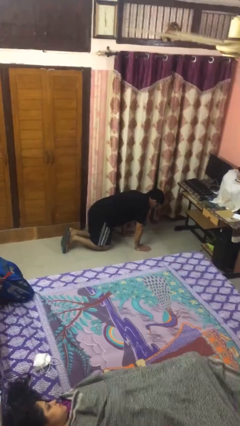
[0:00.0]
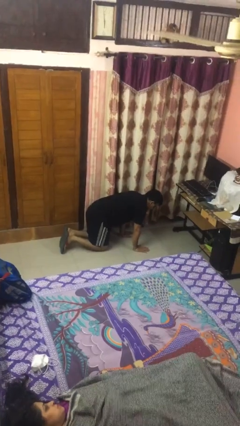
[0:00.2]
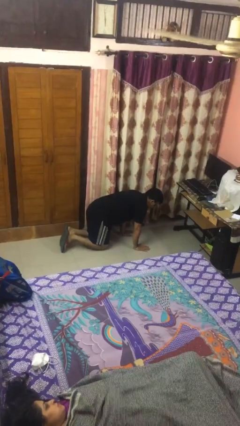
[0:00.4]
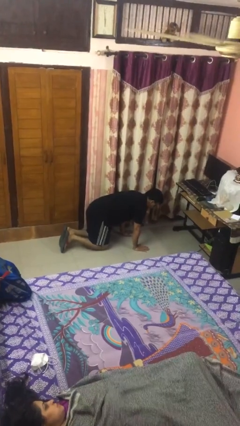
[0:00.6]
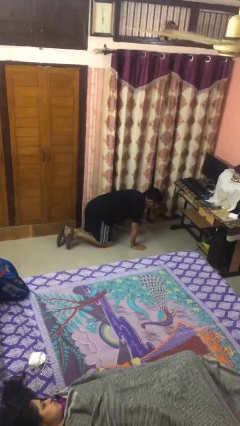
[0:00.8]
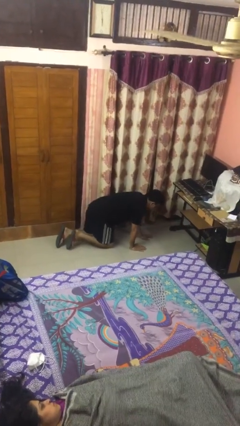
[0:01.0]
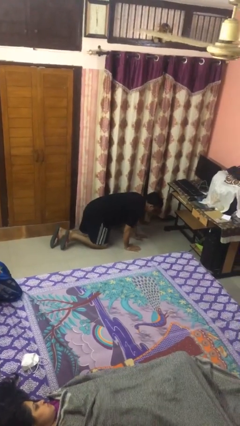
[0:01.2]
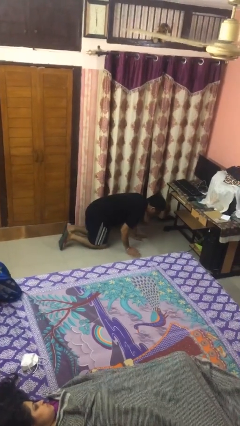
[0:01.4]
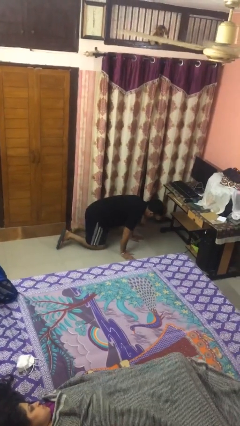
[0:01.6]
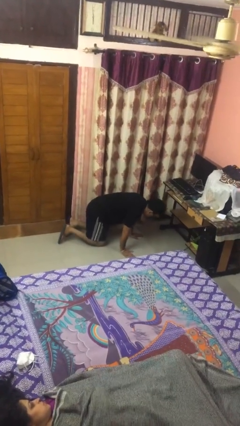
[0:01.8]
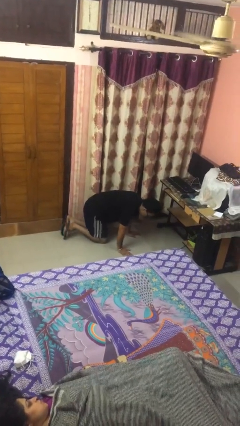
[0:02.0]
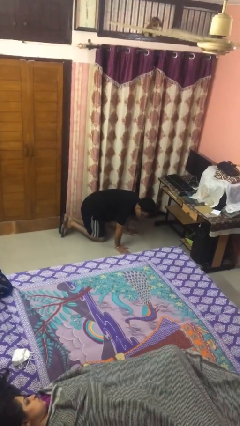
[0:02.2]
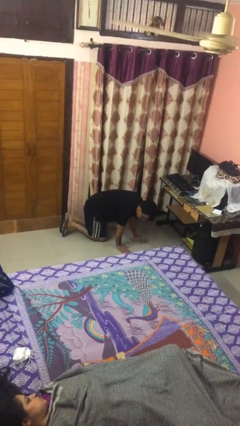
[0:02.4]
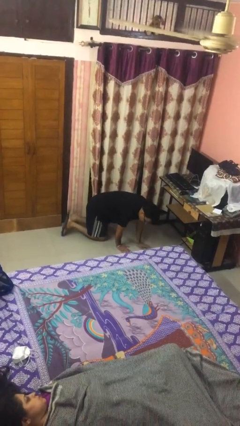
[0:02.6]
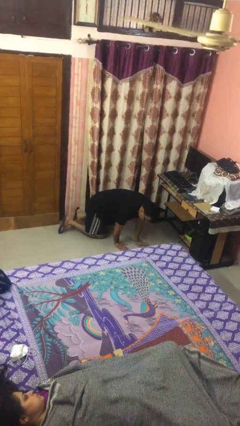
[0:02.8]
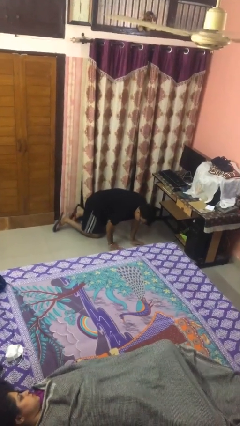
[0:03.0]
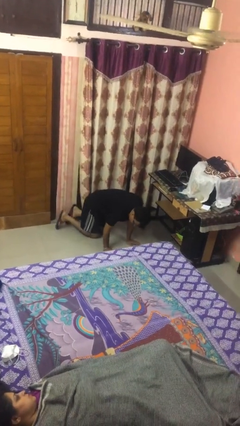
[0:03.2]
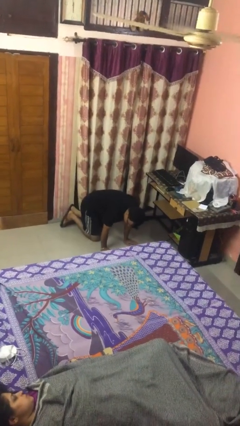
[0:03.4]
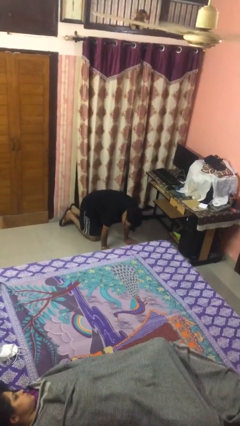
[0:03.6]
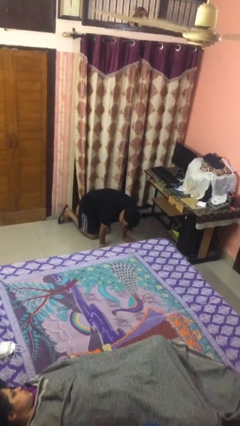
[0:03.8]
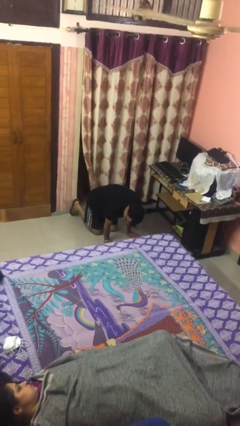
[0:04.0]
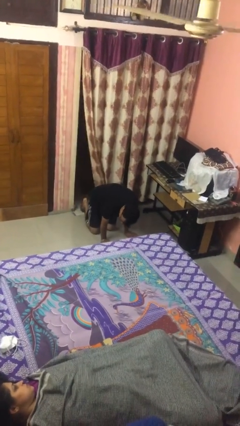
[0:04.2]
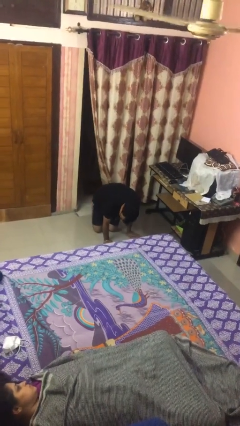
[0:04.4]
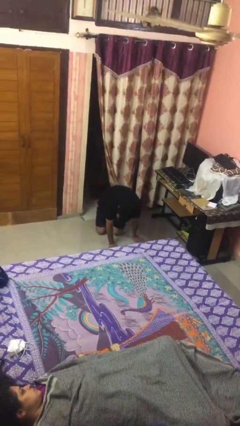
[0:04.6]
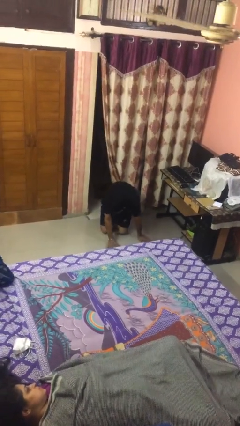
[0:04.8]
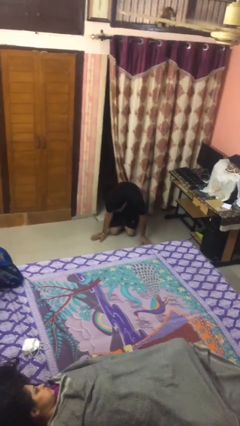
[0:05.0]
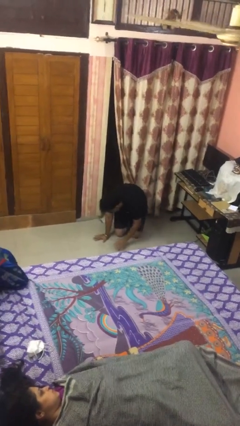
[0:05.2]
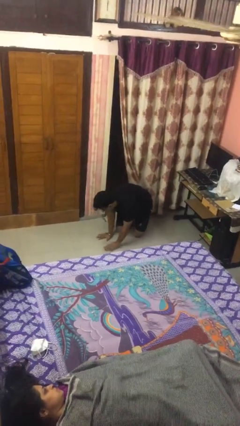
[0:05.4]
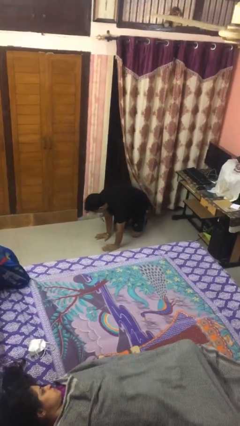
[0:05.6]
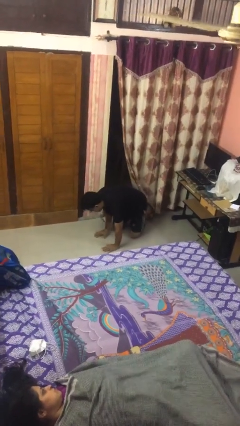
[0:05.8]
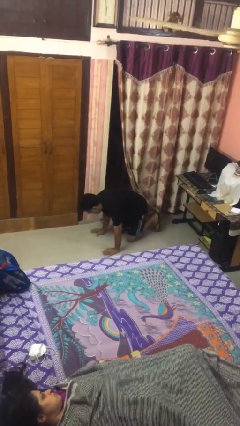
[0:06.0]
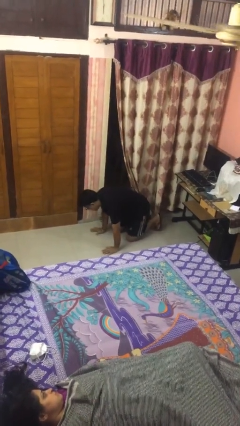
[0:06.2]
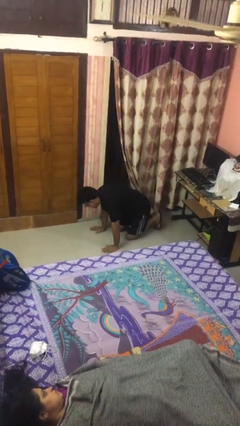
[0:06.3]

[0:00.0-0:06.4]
person crawls

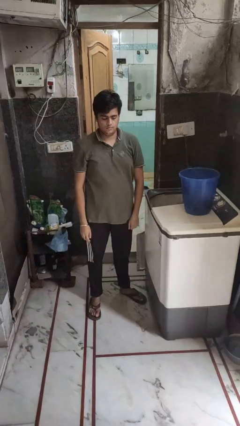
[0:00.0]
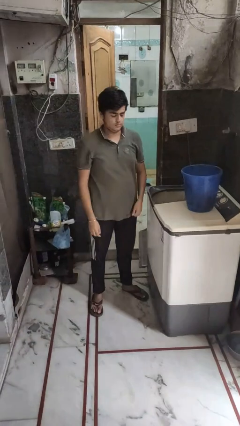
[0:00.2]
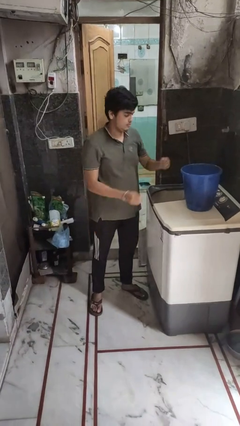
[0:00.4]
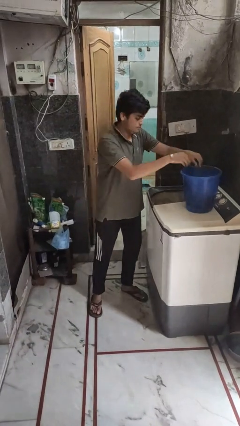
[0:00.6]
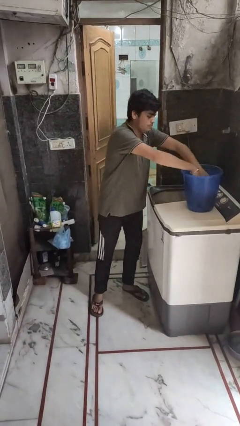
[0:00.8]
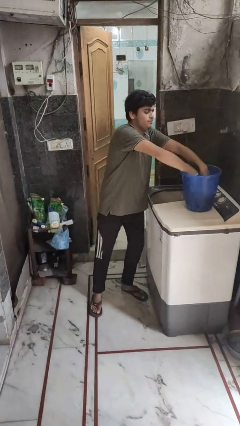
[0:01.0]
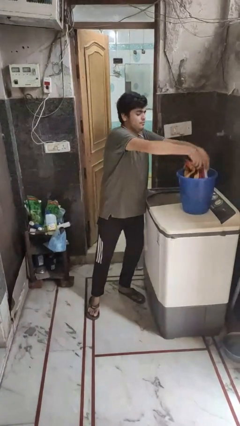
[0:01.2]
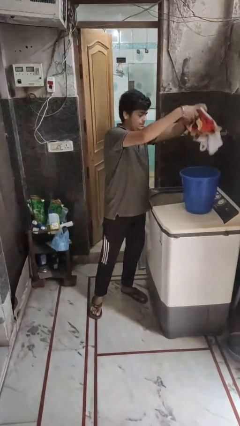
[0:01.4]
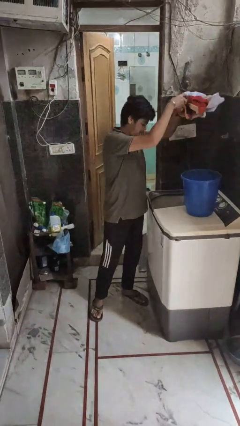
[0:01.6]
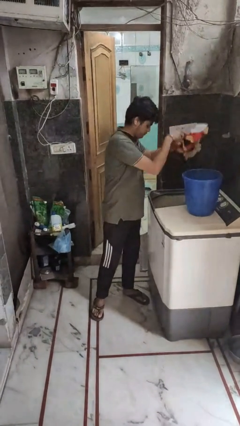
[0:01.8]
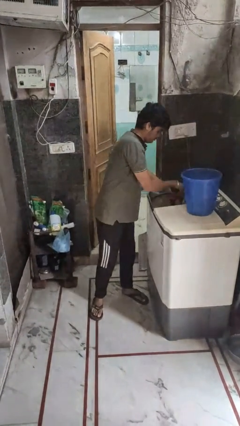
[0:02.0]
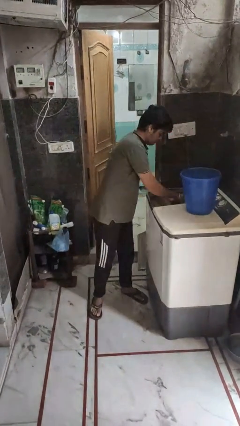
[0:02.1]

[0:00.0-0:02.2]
person loads clotheswasher

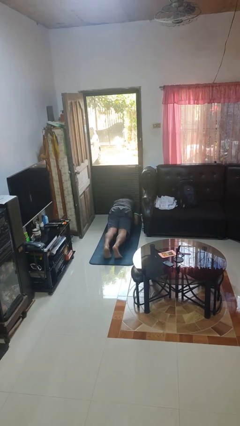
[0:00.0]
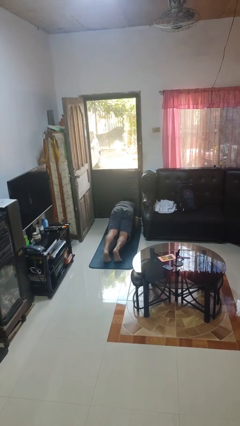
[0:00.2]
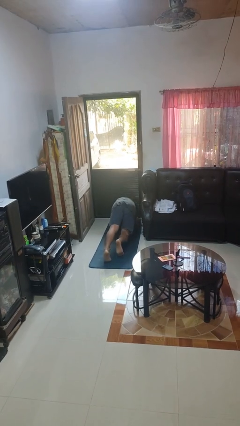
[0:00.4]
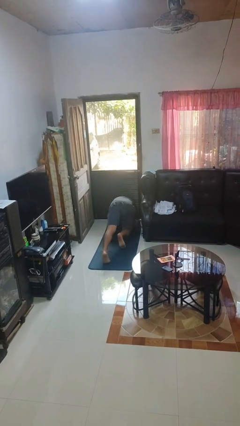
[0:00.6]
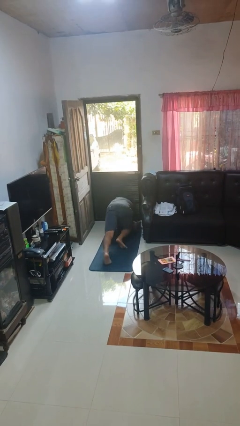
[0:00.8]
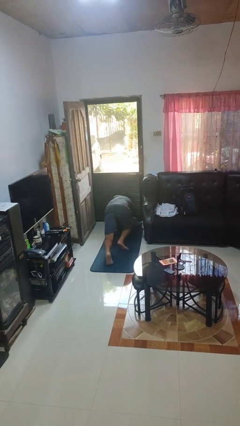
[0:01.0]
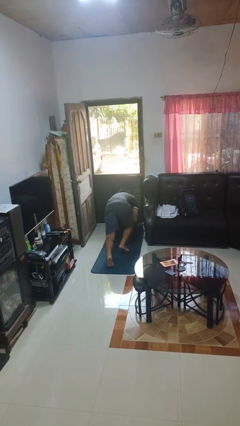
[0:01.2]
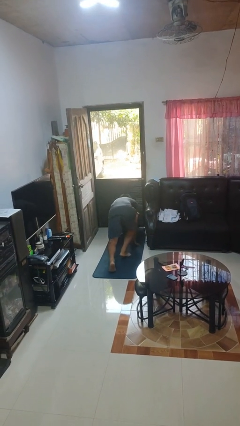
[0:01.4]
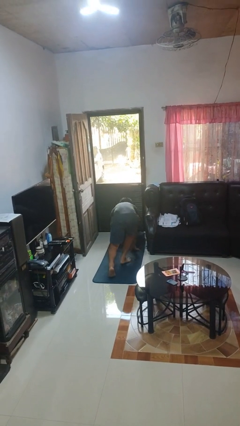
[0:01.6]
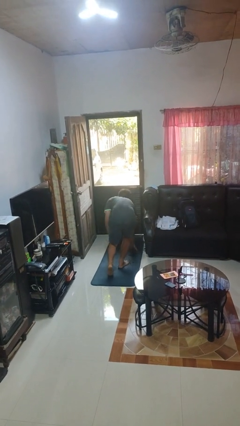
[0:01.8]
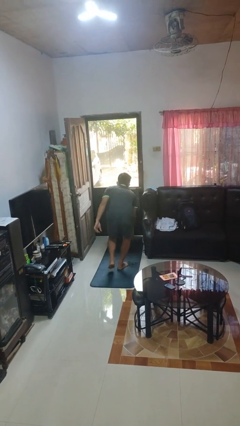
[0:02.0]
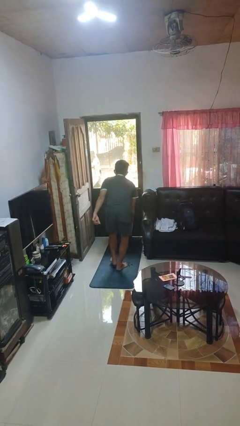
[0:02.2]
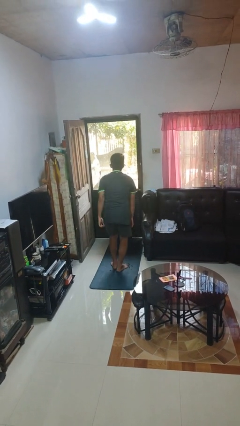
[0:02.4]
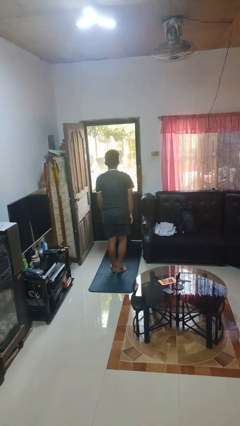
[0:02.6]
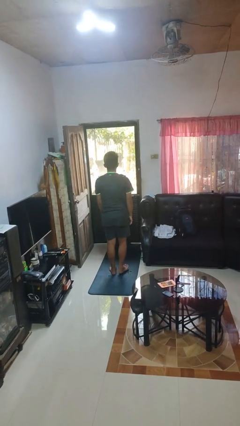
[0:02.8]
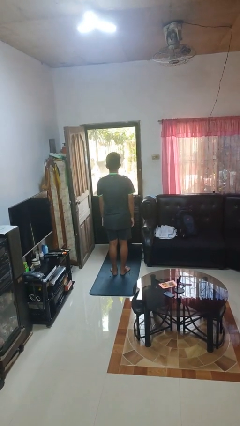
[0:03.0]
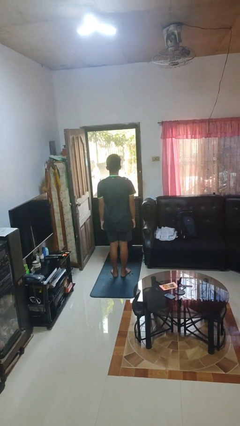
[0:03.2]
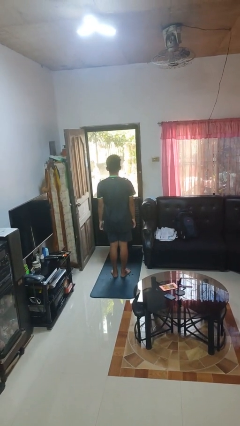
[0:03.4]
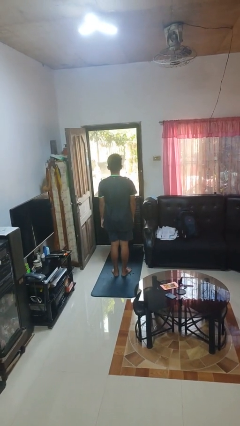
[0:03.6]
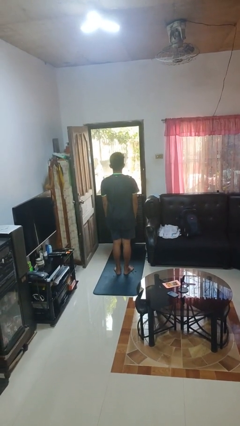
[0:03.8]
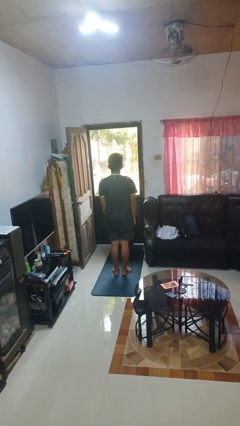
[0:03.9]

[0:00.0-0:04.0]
person stands up from floor

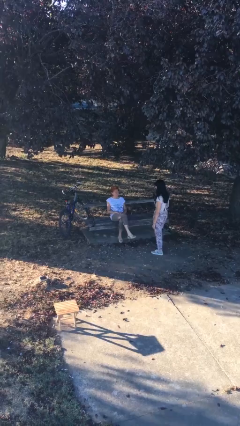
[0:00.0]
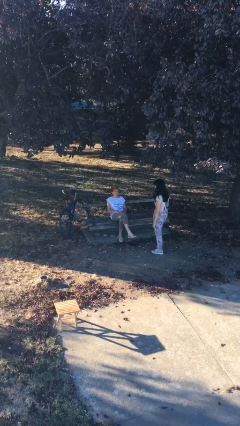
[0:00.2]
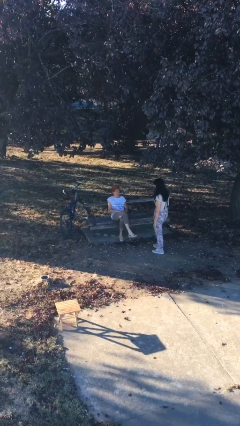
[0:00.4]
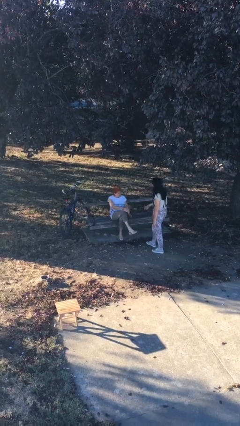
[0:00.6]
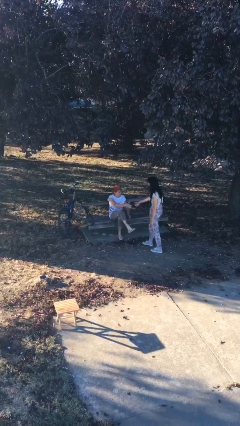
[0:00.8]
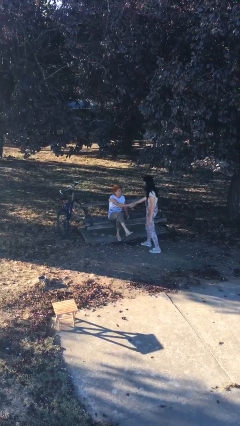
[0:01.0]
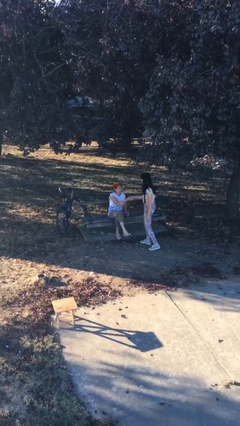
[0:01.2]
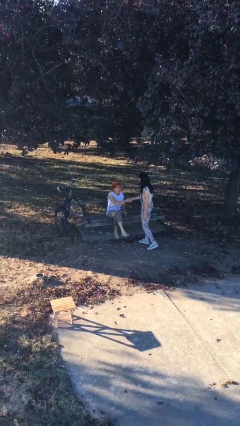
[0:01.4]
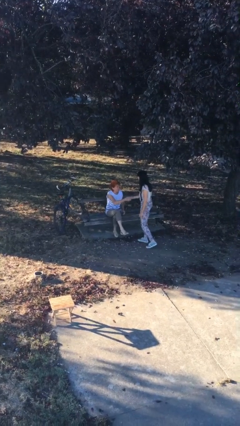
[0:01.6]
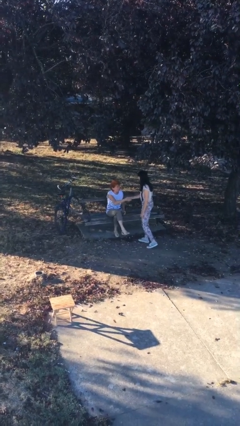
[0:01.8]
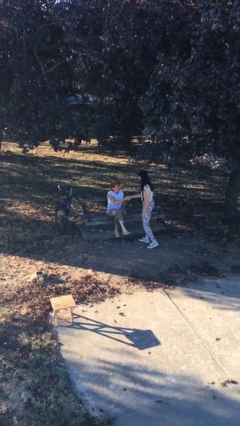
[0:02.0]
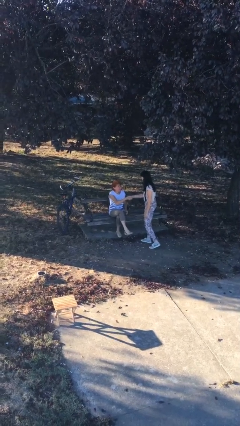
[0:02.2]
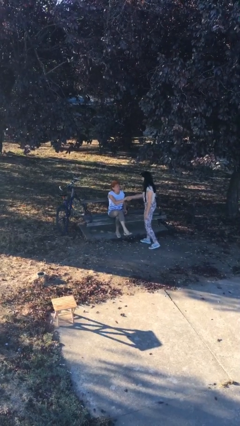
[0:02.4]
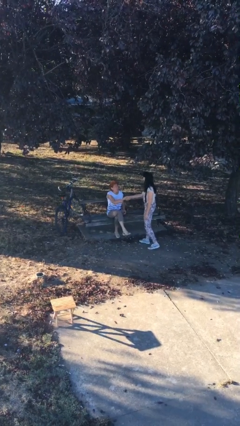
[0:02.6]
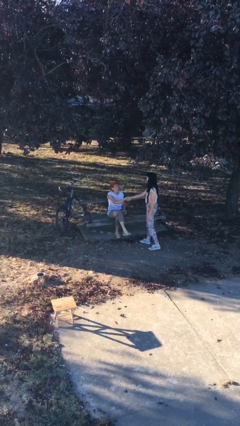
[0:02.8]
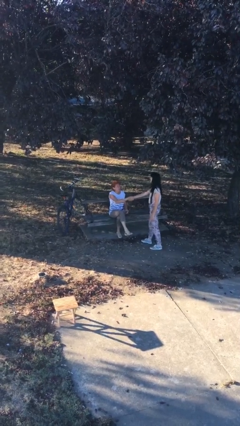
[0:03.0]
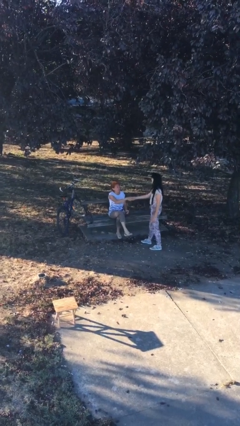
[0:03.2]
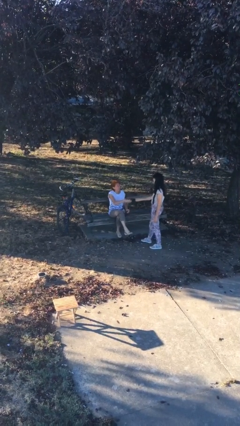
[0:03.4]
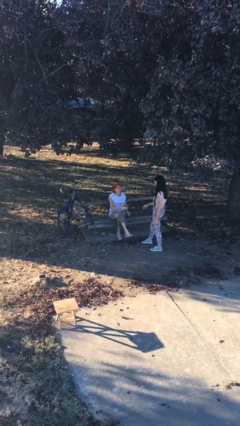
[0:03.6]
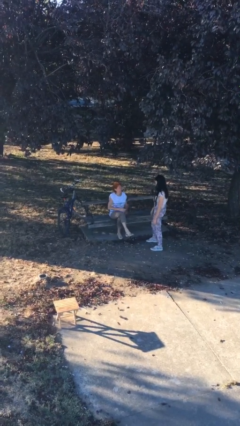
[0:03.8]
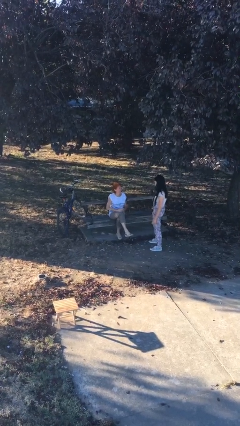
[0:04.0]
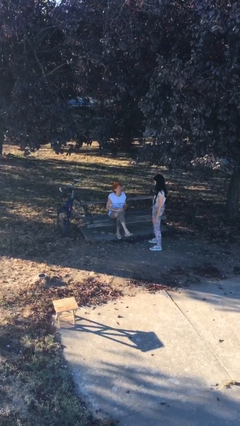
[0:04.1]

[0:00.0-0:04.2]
person shakes hand

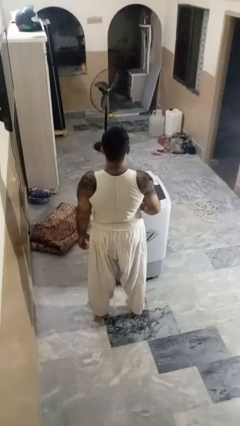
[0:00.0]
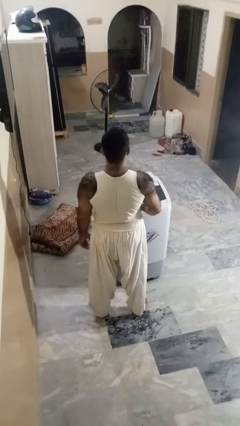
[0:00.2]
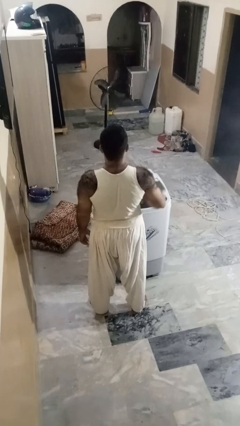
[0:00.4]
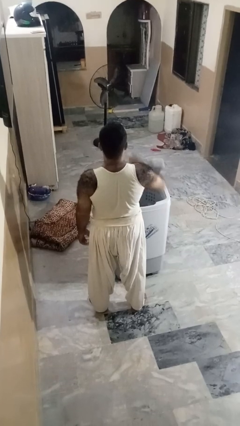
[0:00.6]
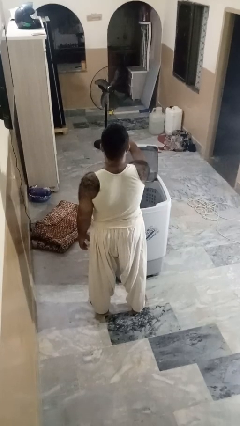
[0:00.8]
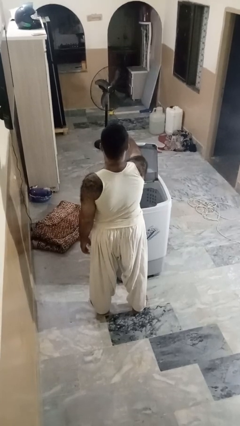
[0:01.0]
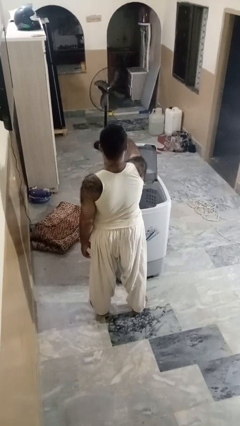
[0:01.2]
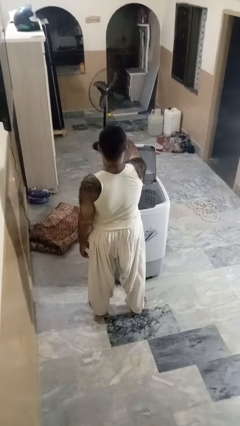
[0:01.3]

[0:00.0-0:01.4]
person opens clothes washer
